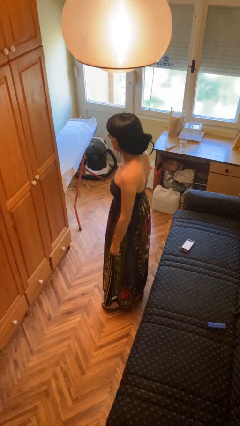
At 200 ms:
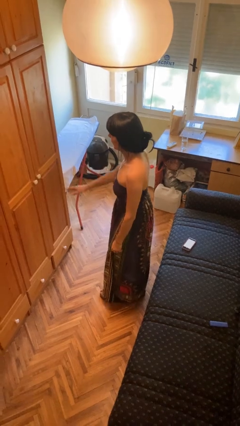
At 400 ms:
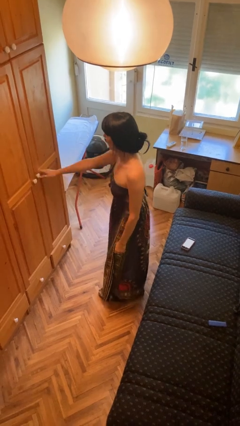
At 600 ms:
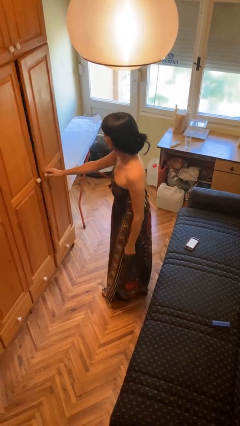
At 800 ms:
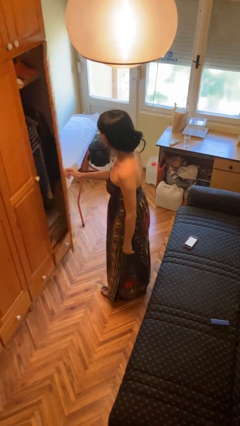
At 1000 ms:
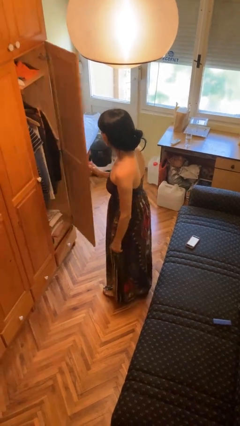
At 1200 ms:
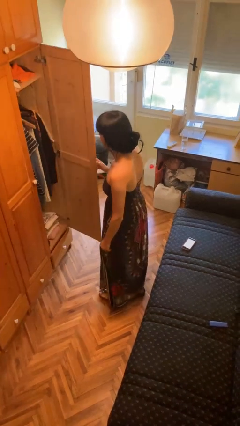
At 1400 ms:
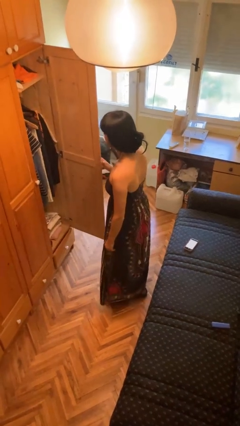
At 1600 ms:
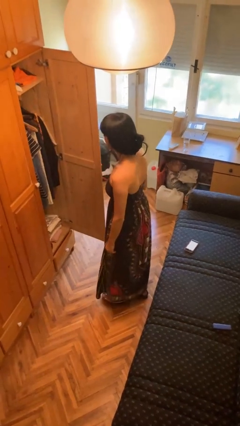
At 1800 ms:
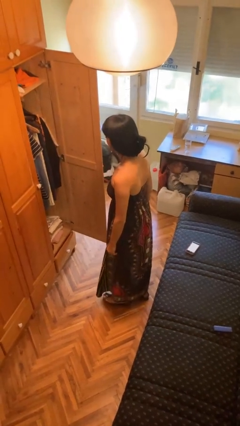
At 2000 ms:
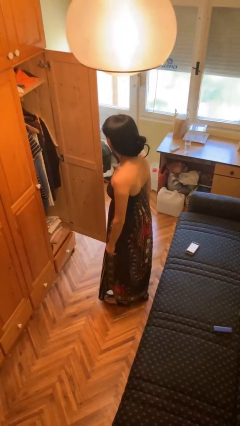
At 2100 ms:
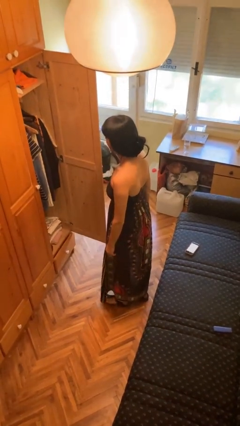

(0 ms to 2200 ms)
person opens closet door

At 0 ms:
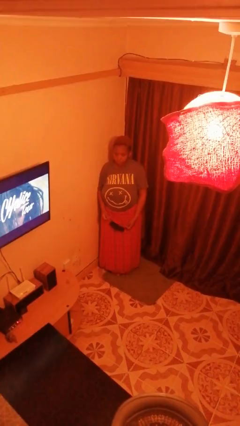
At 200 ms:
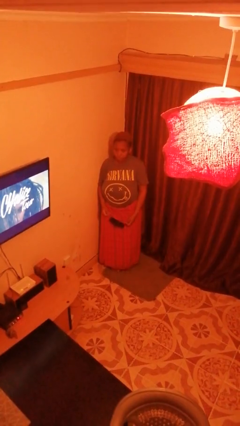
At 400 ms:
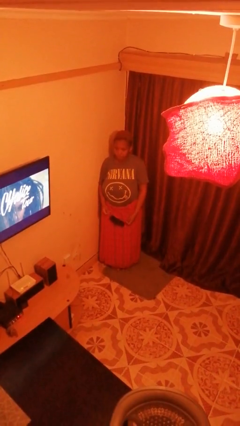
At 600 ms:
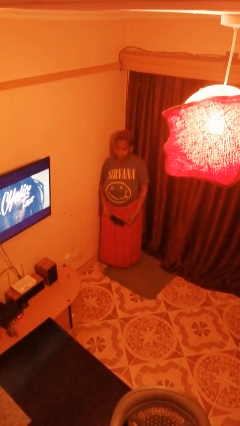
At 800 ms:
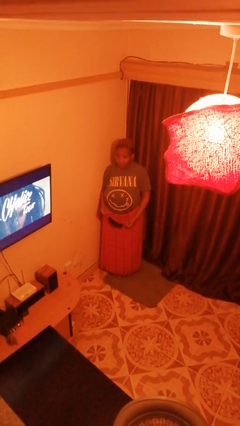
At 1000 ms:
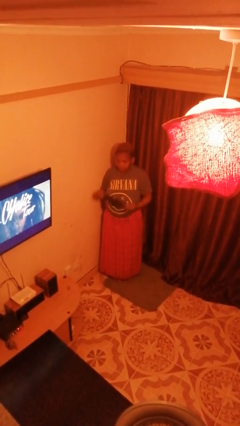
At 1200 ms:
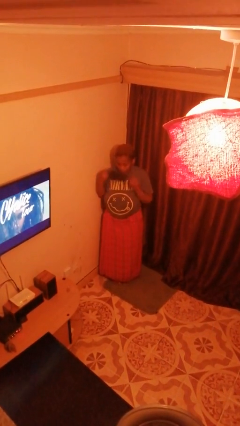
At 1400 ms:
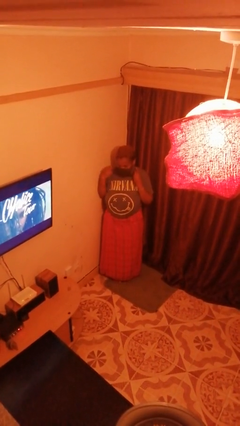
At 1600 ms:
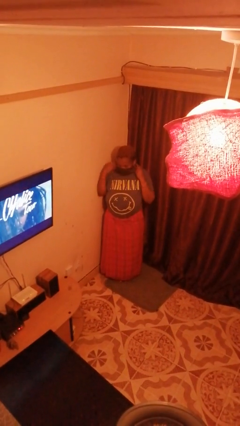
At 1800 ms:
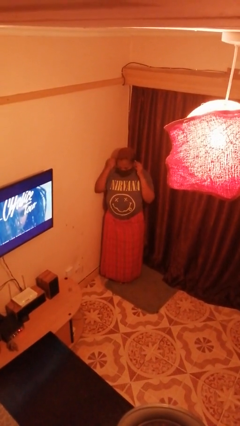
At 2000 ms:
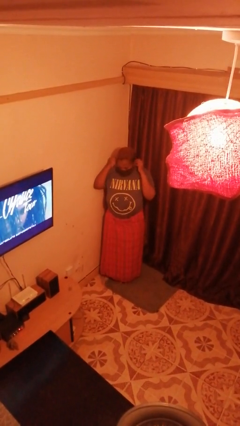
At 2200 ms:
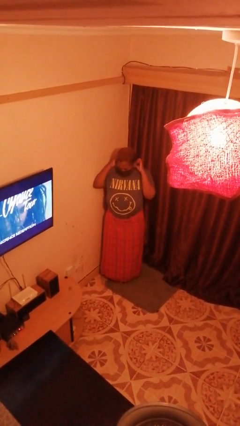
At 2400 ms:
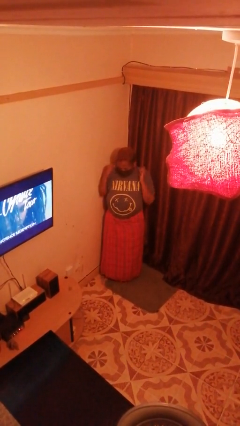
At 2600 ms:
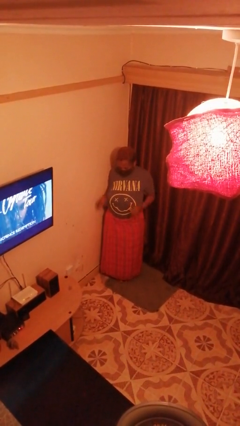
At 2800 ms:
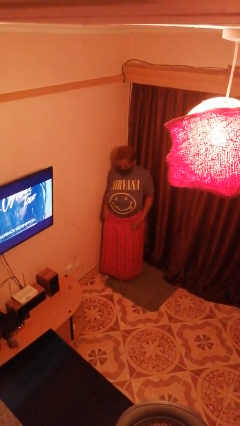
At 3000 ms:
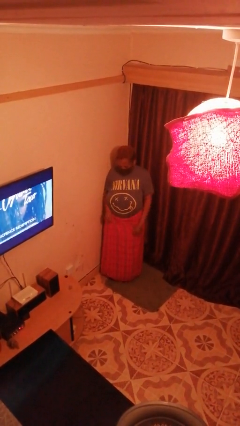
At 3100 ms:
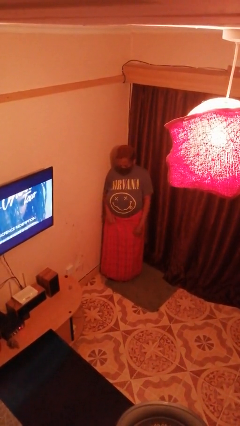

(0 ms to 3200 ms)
person puts on facemask

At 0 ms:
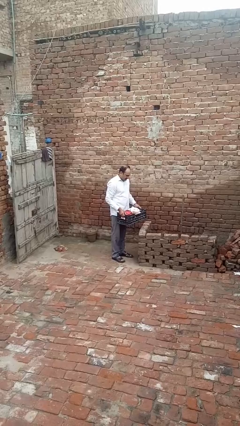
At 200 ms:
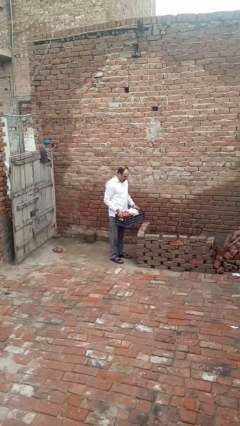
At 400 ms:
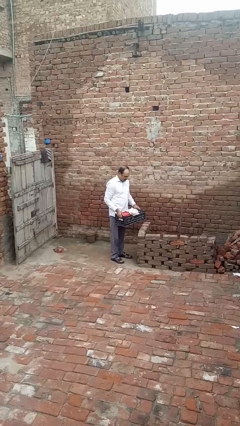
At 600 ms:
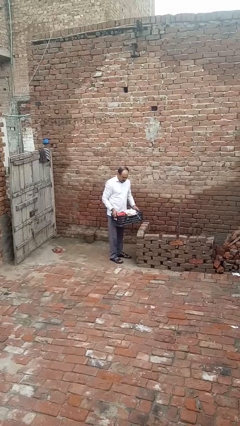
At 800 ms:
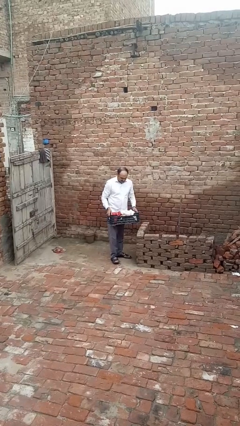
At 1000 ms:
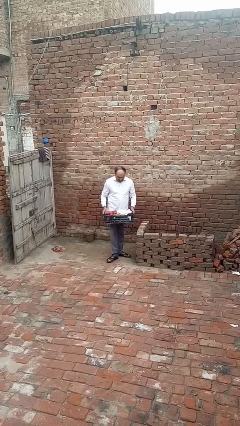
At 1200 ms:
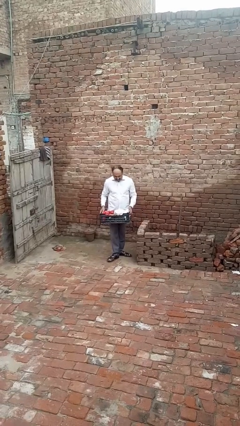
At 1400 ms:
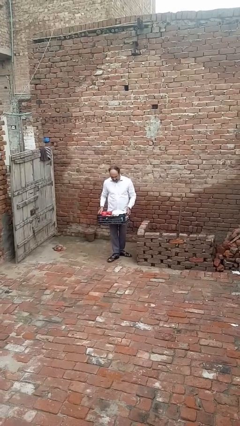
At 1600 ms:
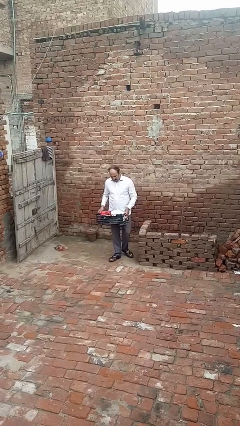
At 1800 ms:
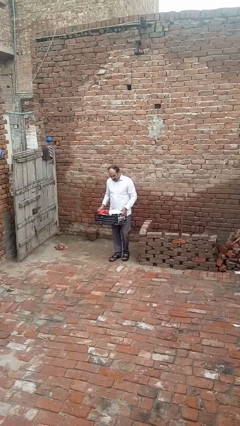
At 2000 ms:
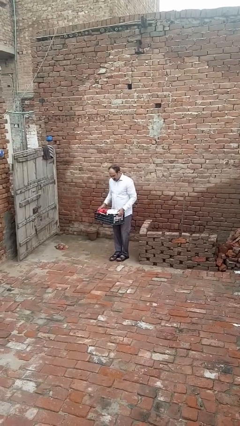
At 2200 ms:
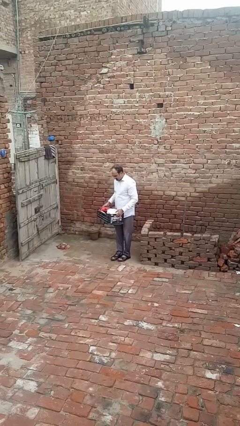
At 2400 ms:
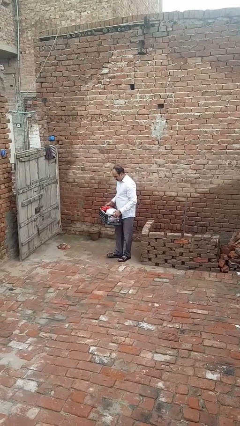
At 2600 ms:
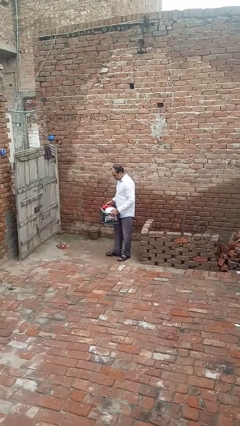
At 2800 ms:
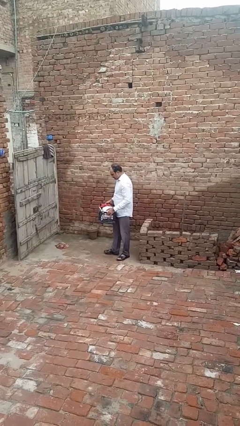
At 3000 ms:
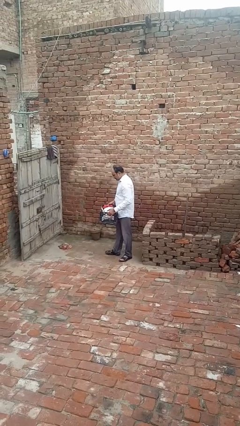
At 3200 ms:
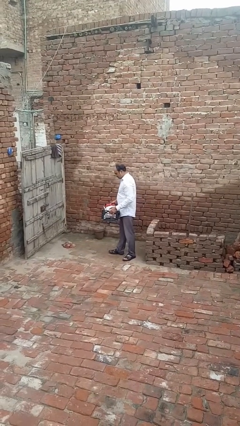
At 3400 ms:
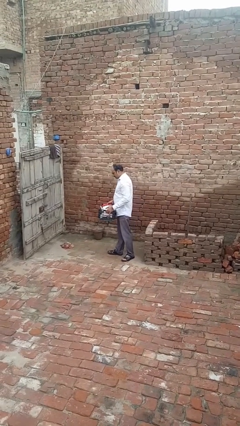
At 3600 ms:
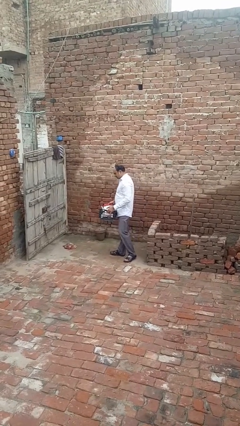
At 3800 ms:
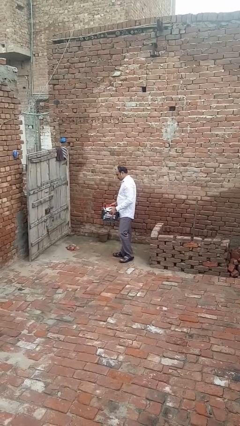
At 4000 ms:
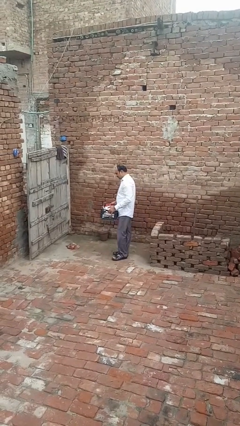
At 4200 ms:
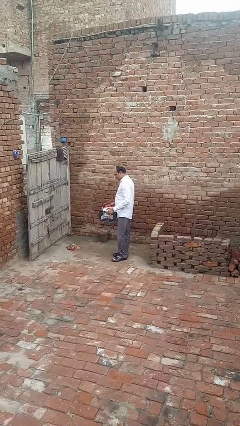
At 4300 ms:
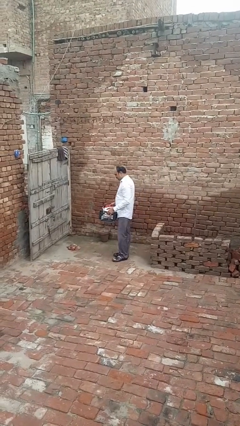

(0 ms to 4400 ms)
person carries laundry basket

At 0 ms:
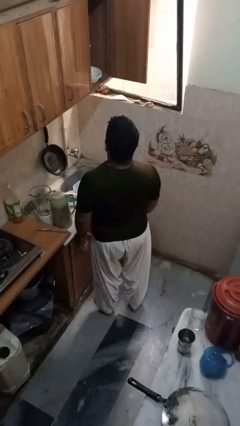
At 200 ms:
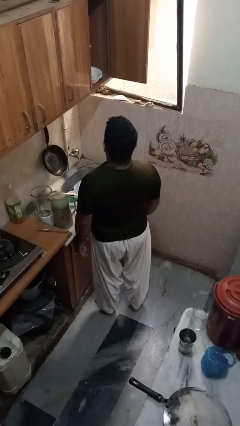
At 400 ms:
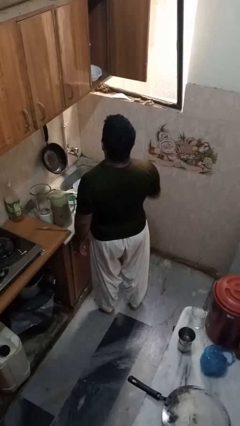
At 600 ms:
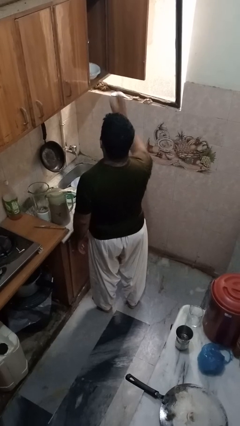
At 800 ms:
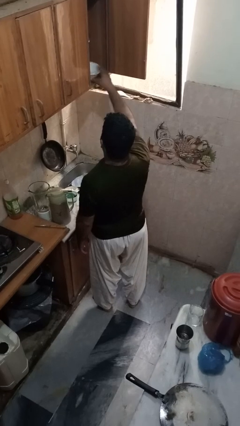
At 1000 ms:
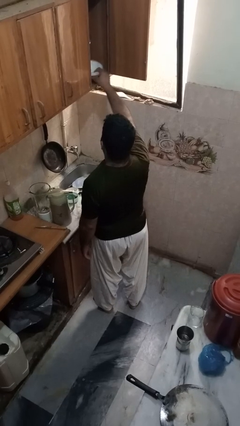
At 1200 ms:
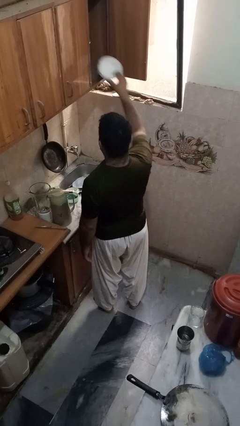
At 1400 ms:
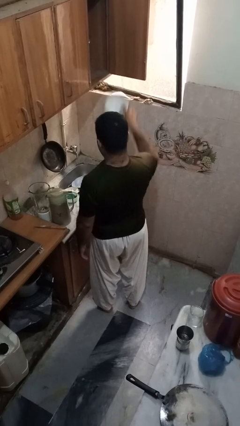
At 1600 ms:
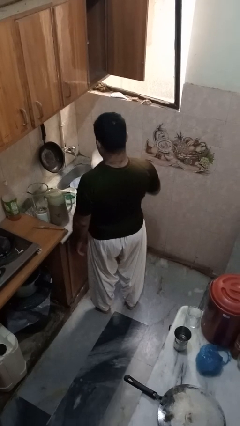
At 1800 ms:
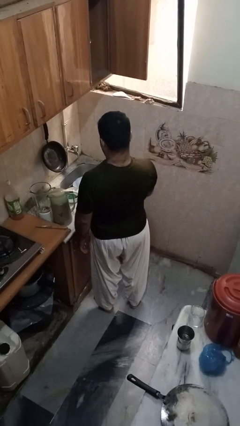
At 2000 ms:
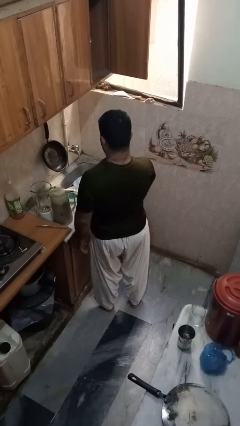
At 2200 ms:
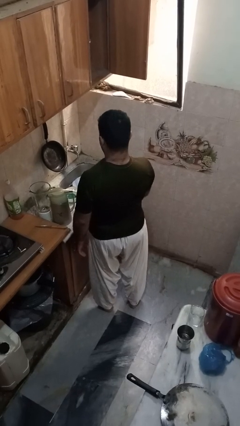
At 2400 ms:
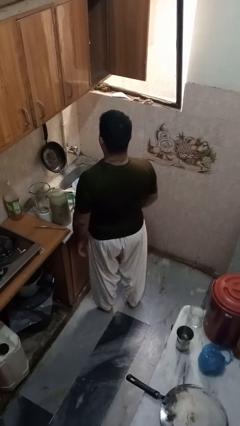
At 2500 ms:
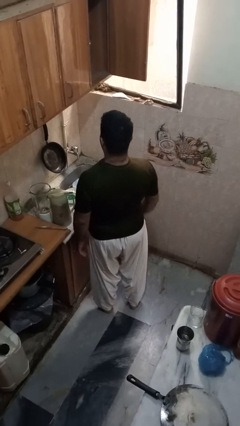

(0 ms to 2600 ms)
person takes object from cabinet

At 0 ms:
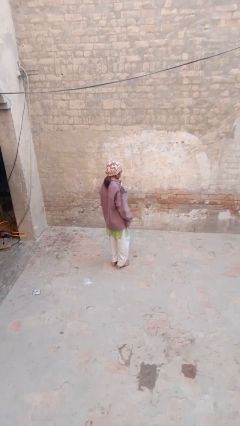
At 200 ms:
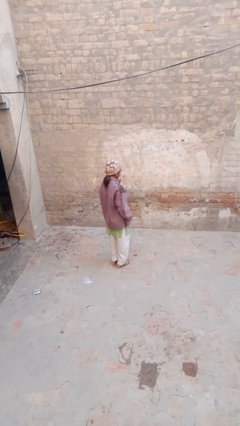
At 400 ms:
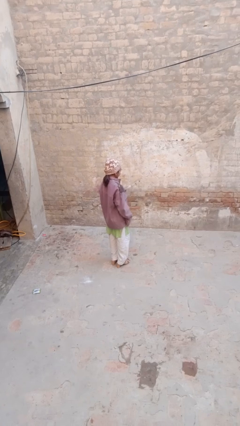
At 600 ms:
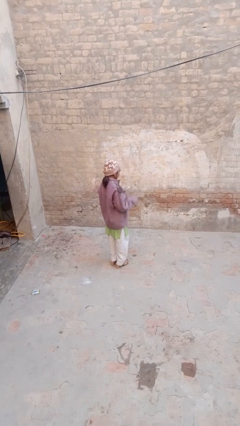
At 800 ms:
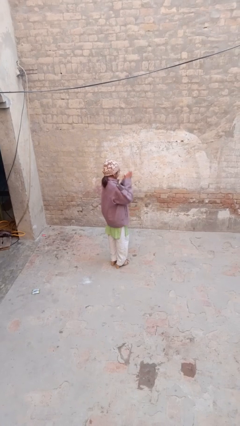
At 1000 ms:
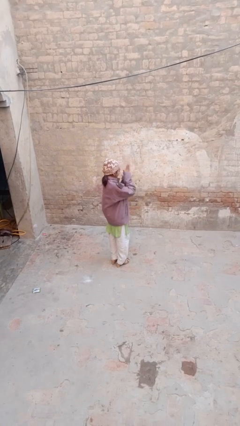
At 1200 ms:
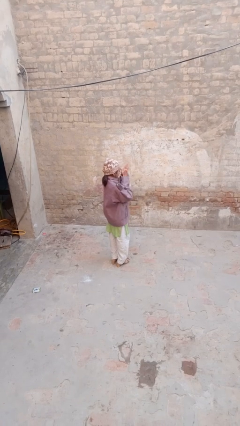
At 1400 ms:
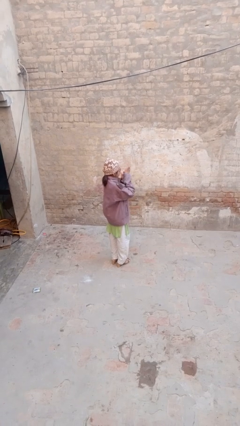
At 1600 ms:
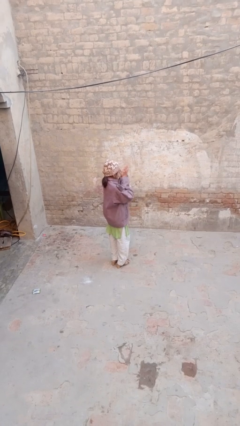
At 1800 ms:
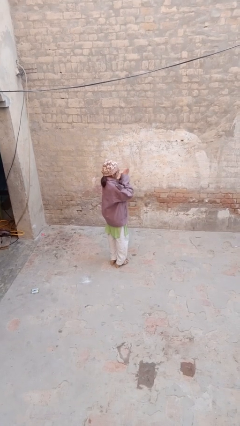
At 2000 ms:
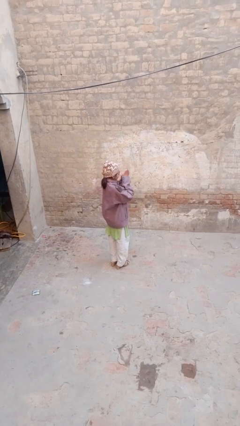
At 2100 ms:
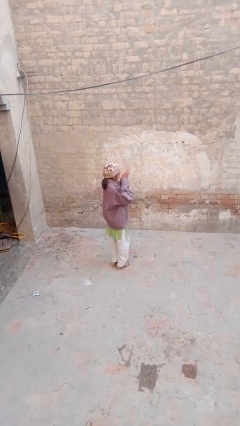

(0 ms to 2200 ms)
person blows into hands

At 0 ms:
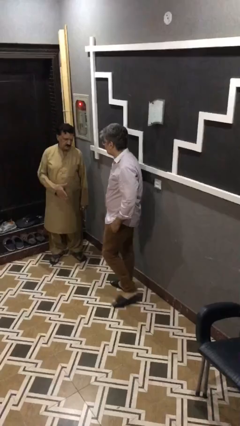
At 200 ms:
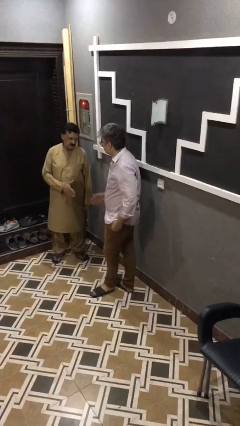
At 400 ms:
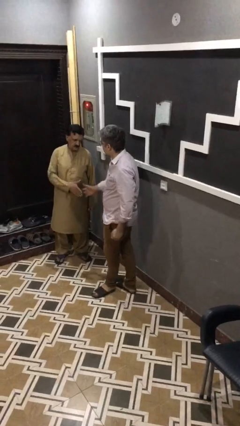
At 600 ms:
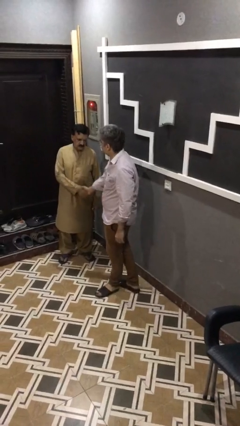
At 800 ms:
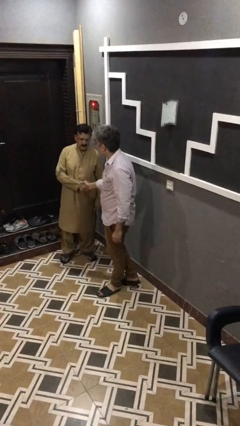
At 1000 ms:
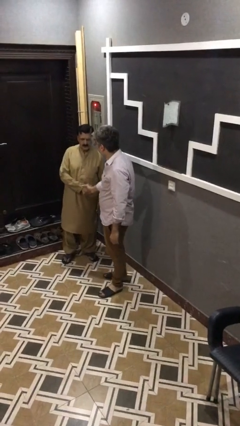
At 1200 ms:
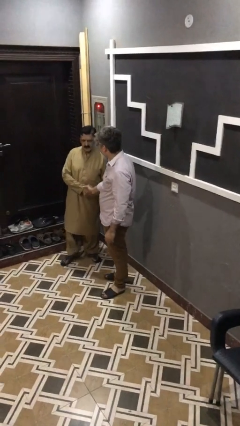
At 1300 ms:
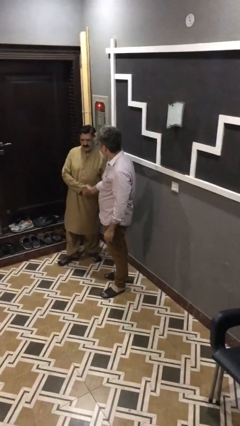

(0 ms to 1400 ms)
person shakes hand

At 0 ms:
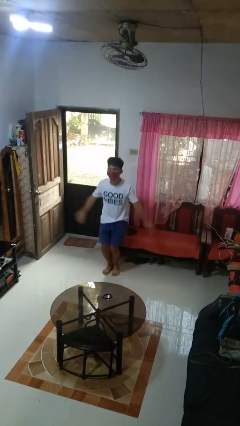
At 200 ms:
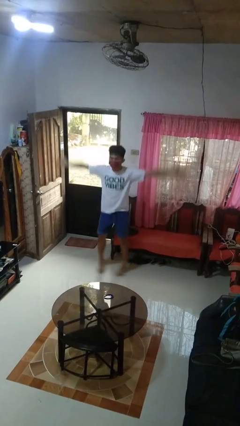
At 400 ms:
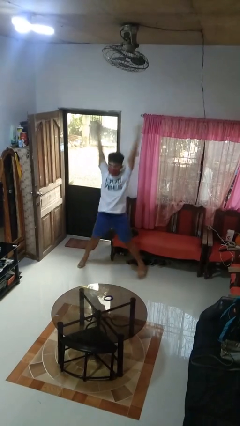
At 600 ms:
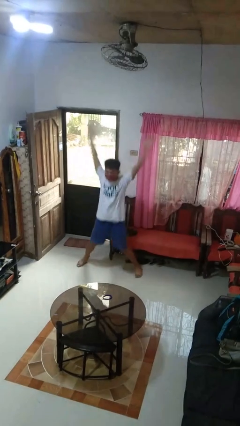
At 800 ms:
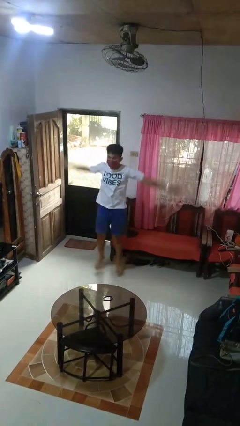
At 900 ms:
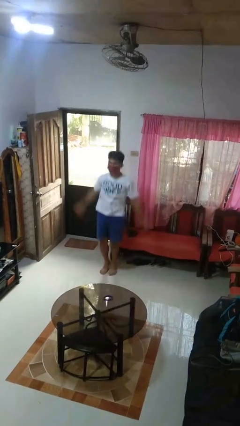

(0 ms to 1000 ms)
person exercises with jumping jacks
